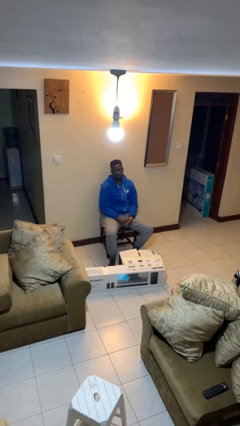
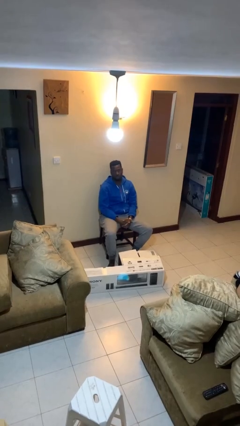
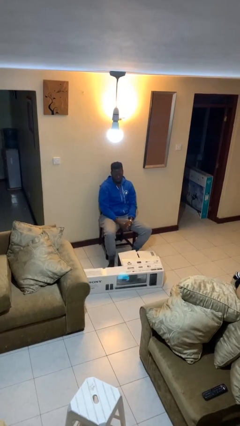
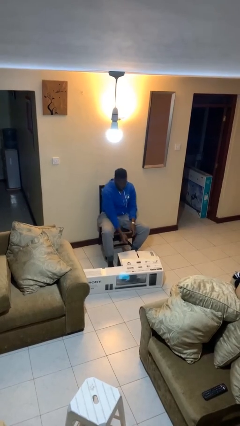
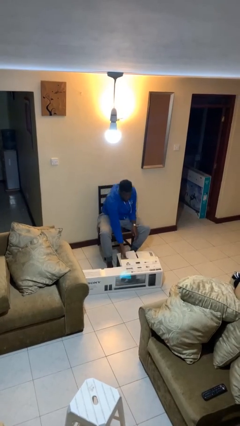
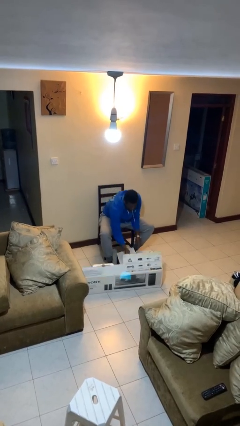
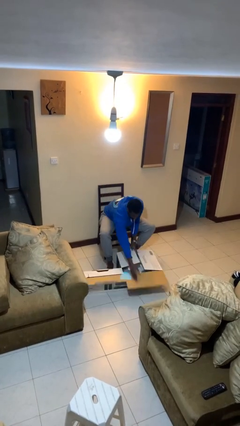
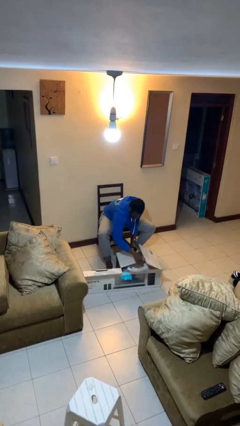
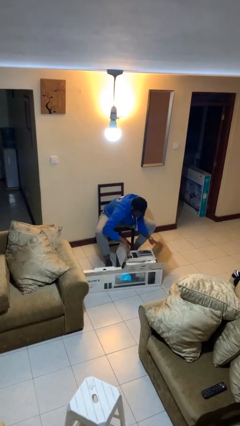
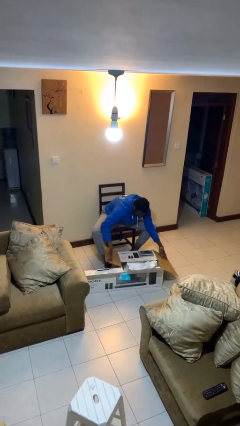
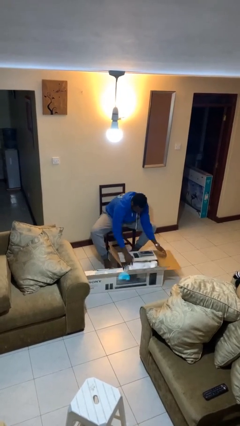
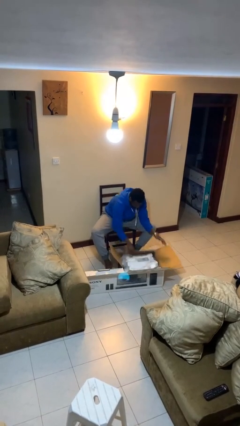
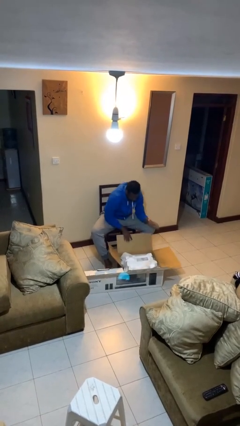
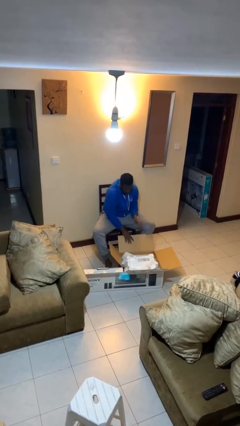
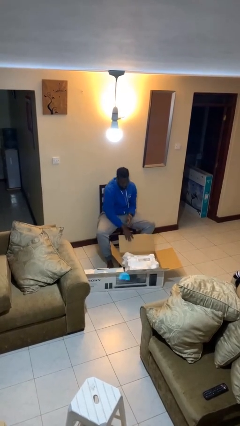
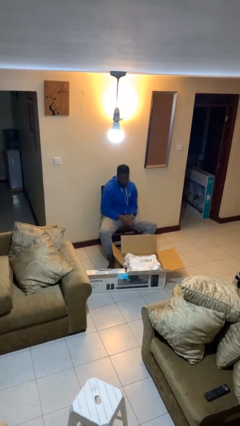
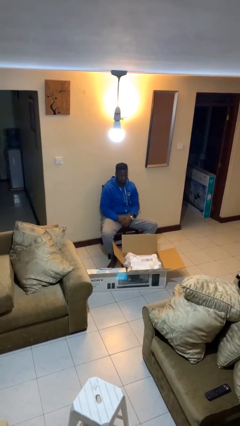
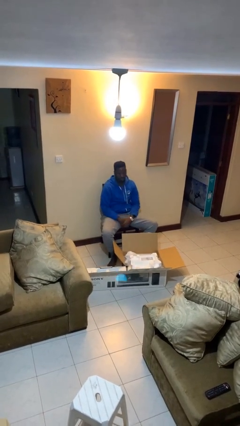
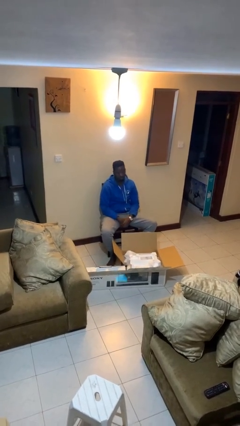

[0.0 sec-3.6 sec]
person opens box

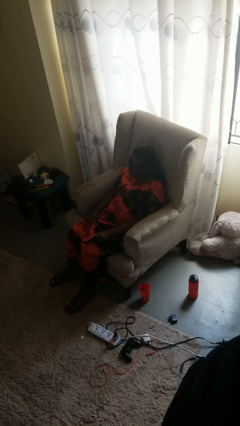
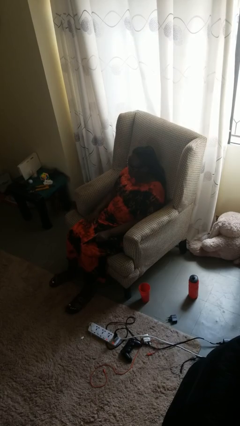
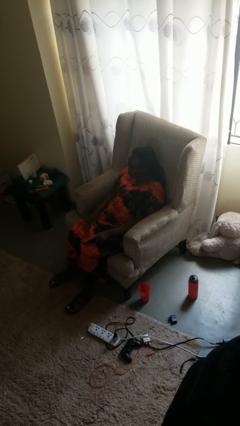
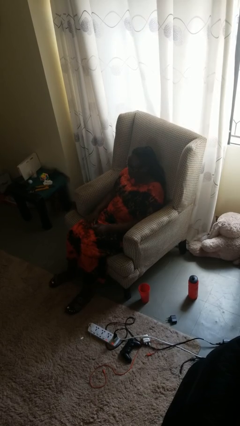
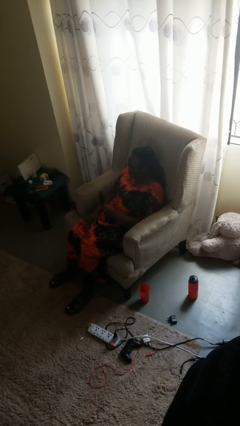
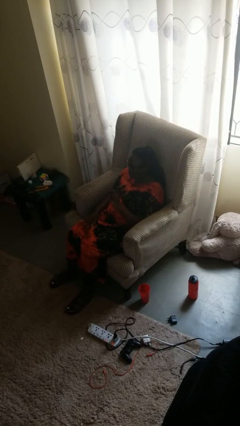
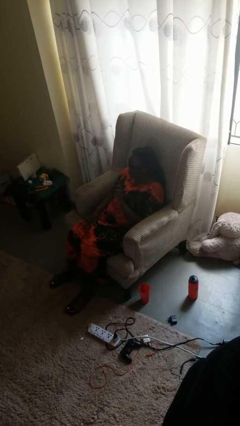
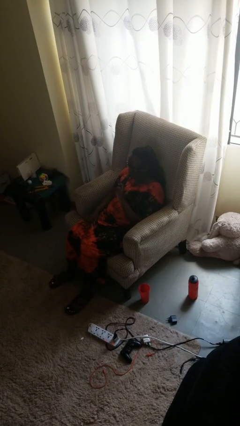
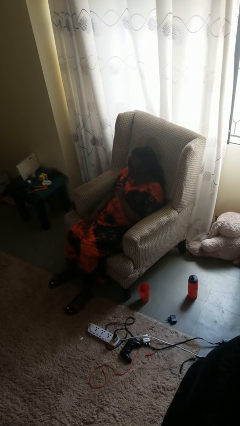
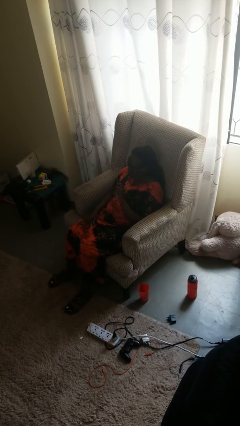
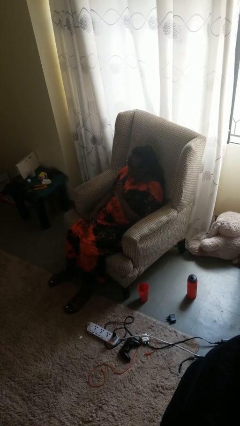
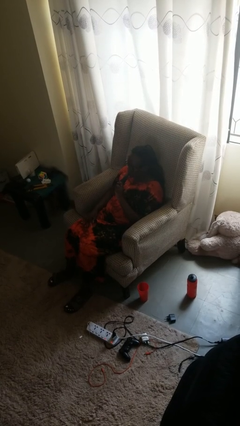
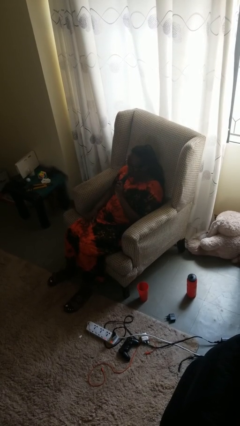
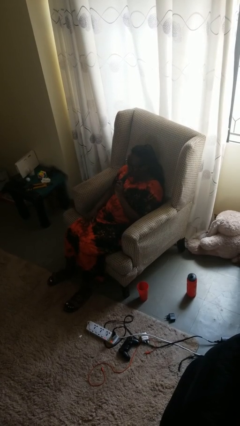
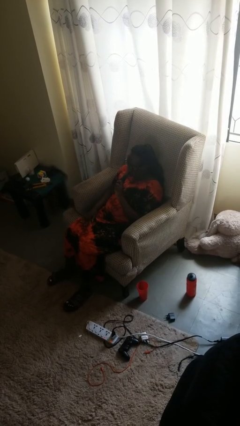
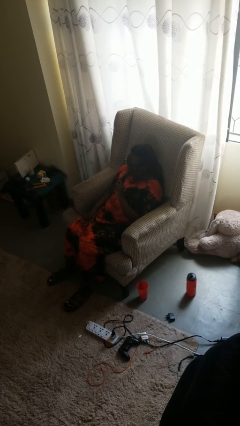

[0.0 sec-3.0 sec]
person vapes

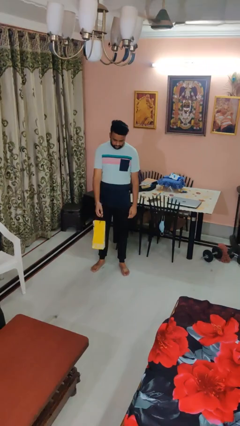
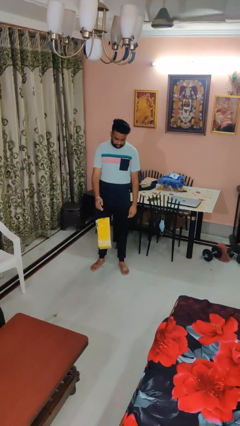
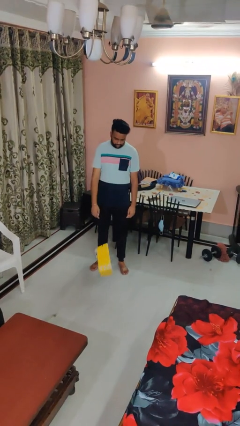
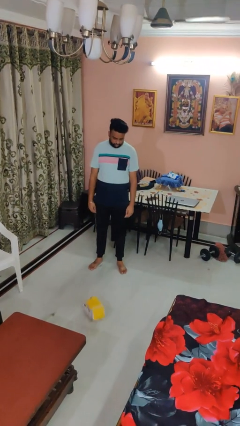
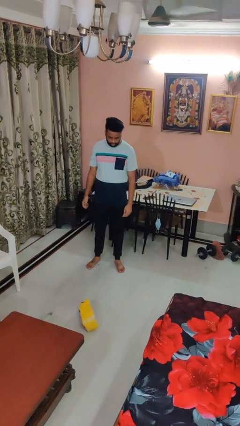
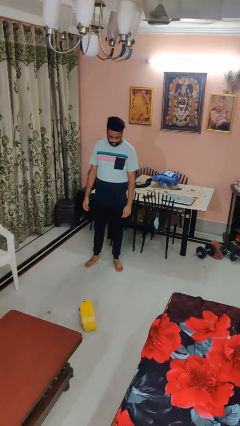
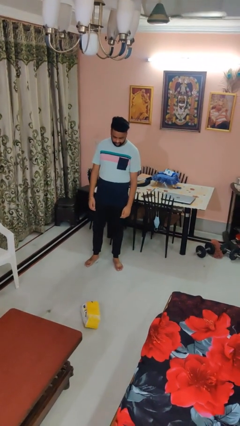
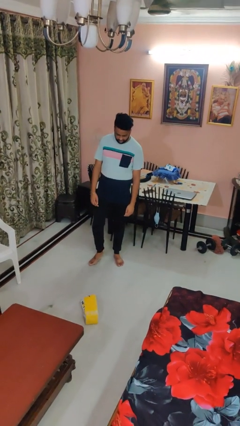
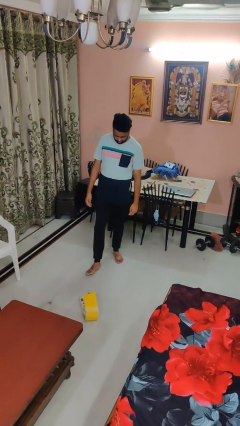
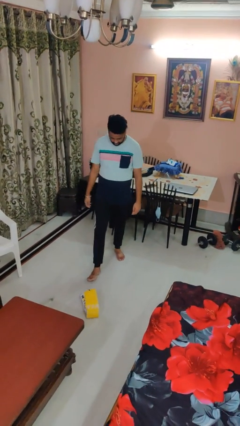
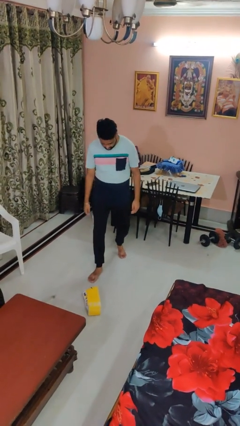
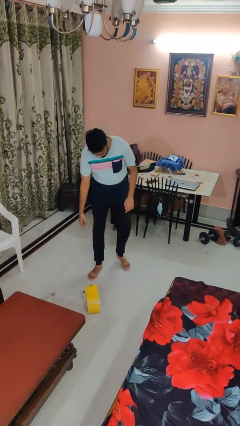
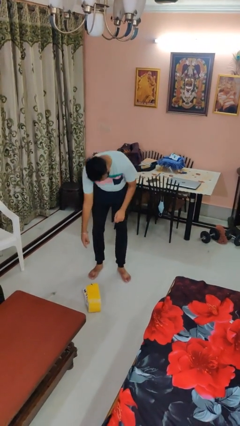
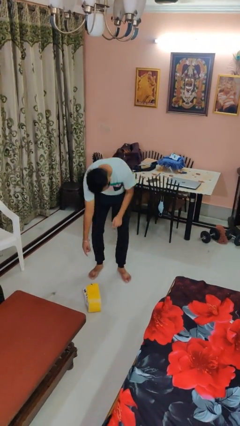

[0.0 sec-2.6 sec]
person drops object

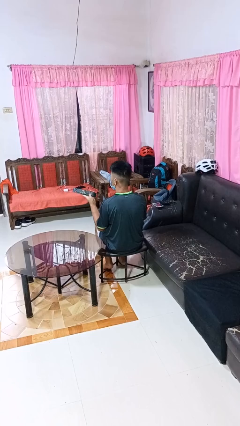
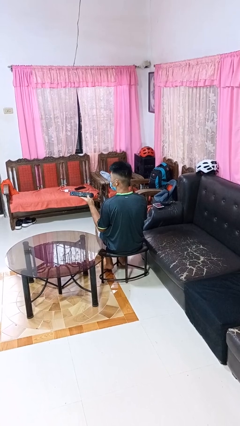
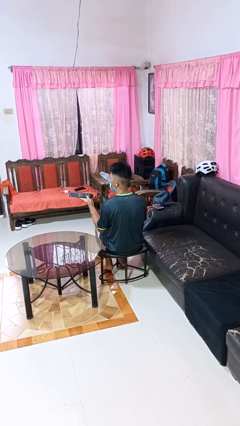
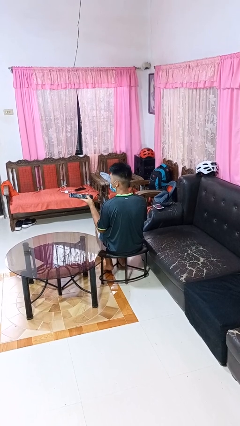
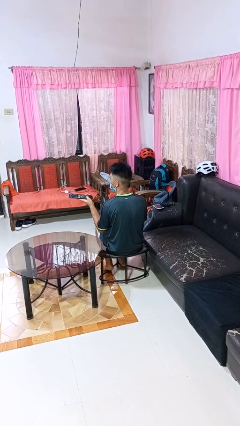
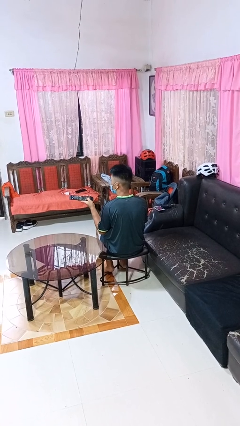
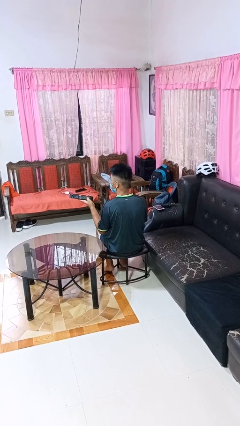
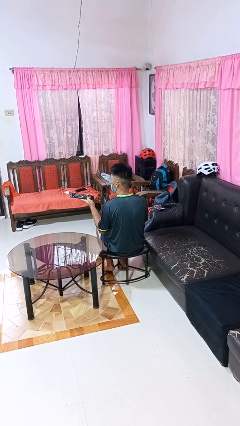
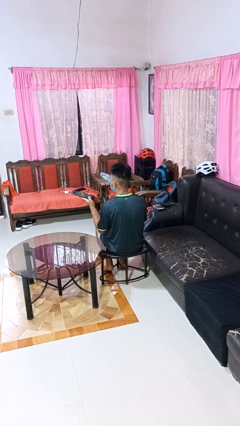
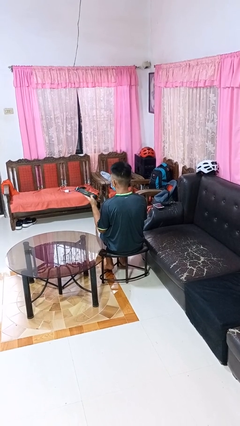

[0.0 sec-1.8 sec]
person uses television remote

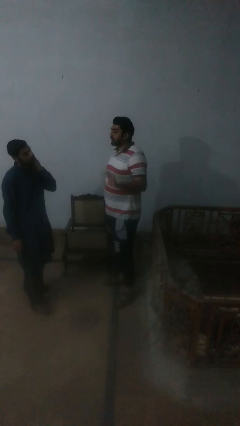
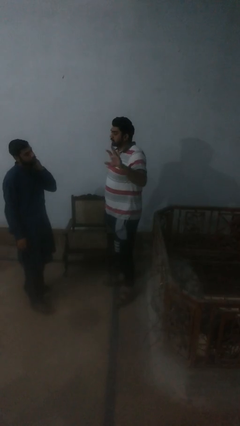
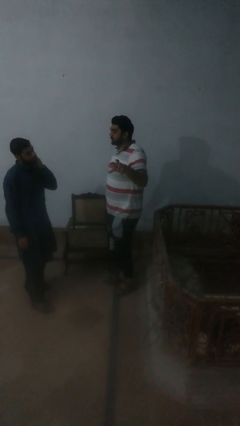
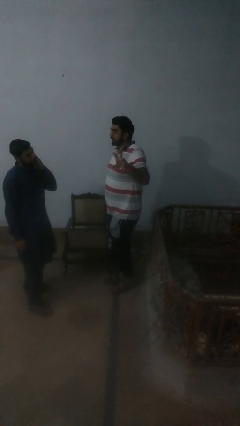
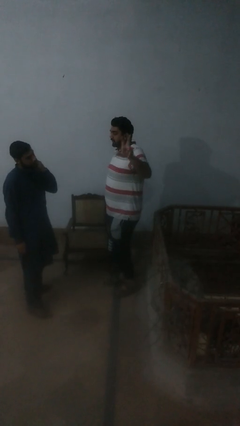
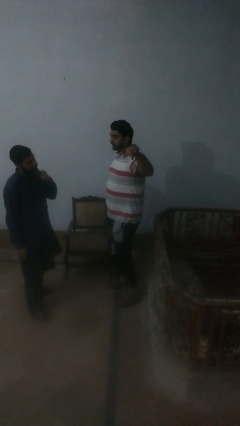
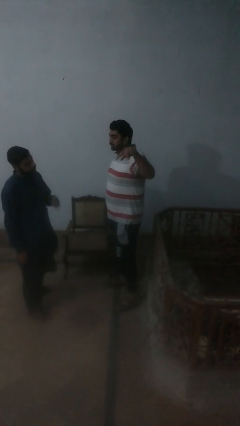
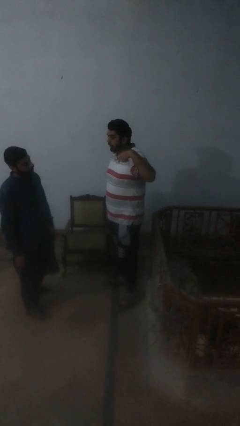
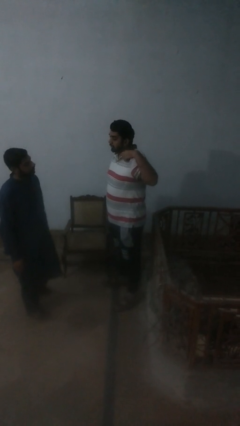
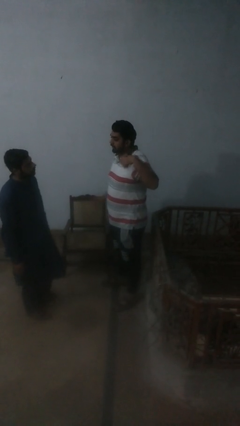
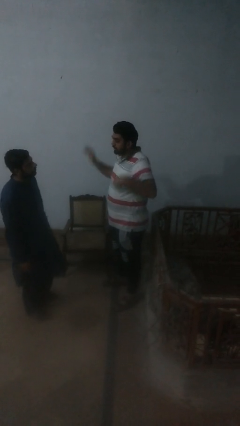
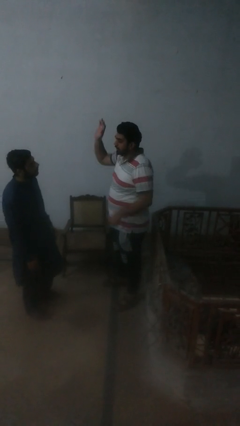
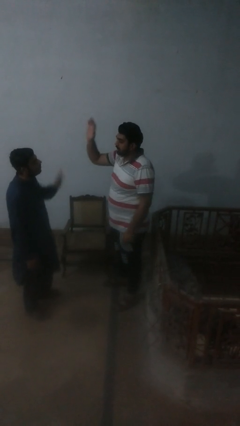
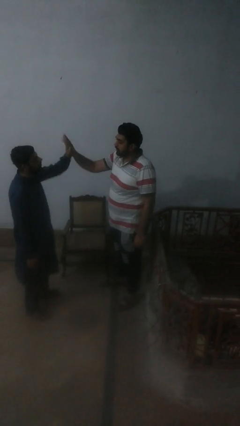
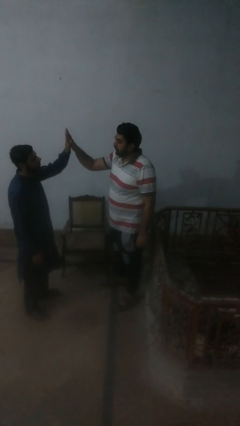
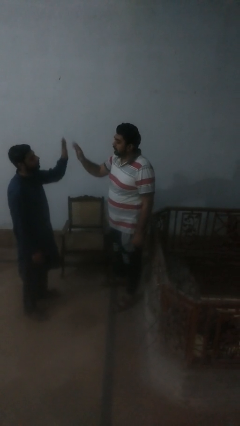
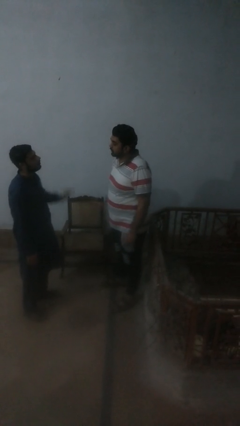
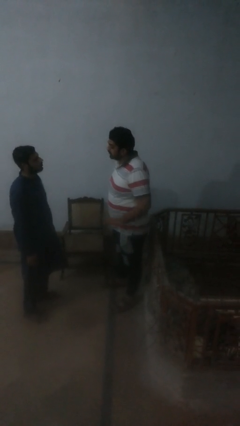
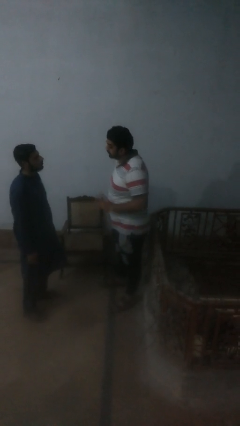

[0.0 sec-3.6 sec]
person highfives hand

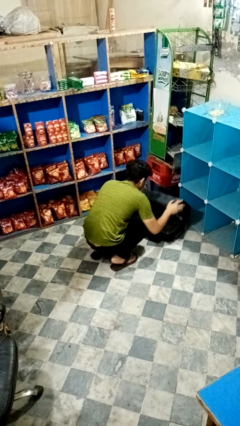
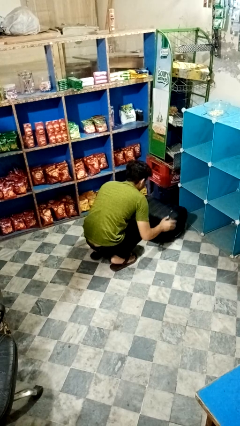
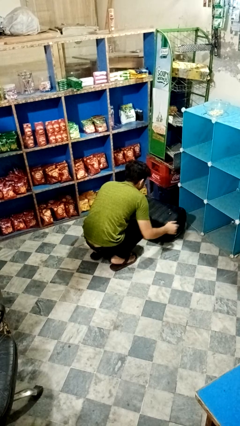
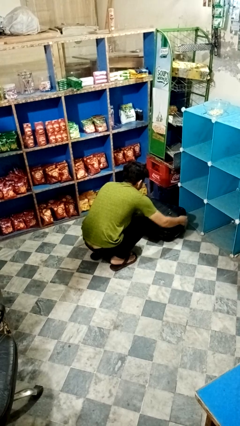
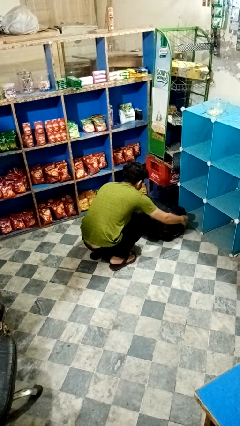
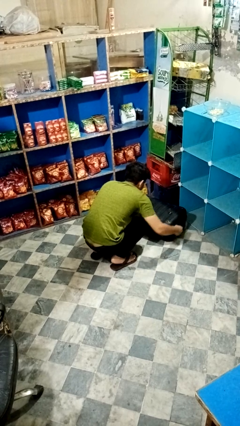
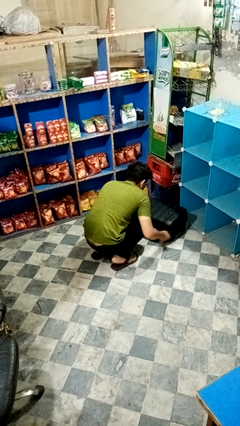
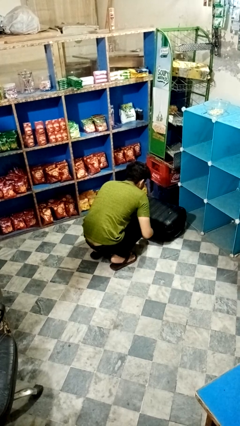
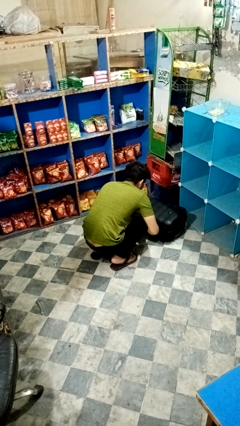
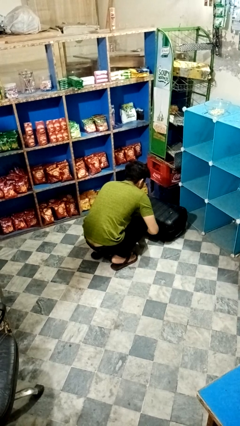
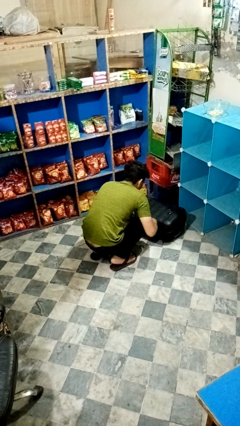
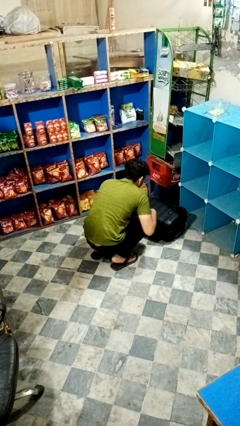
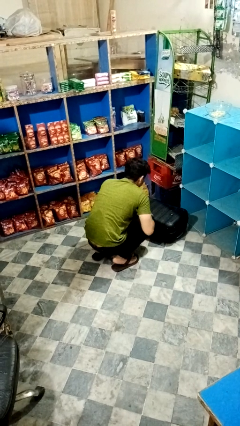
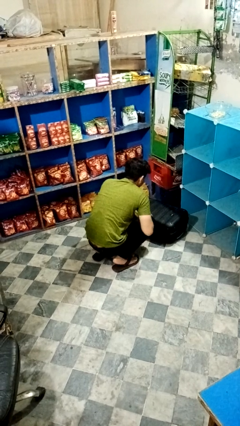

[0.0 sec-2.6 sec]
person closes suitcase

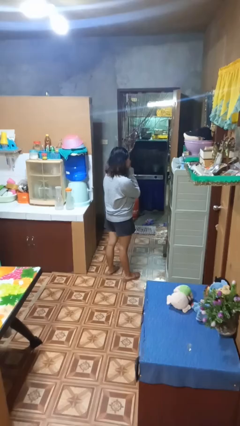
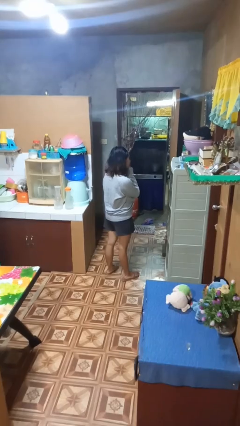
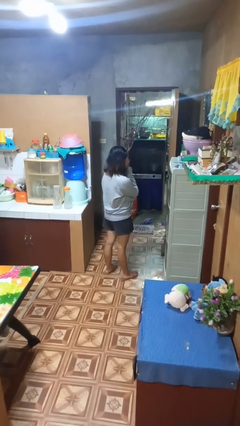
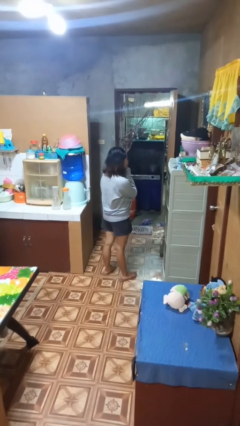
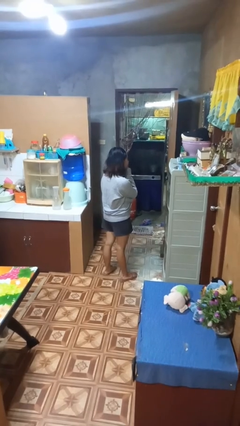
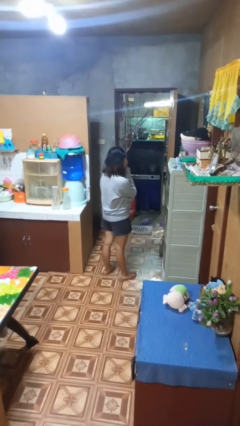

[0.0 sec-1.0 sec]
person gestures be quiet
